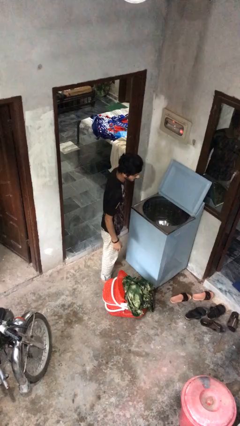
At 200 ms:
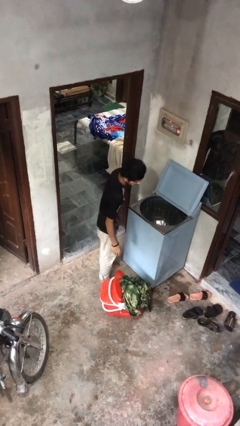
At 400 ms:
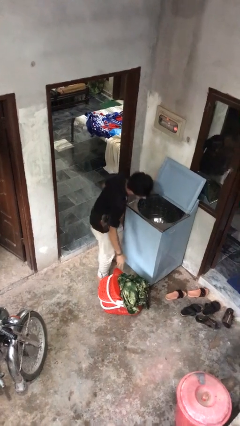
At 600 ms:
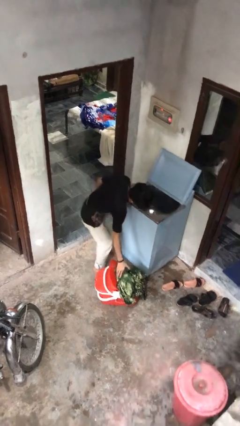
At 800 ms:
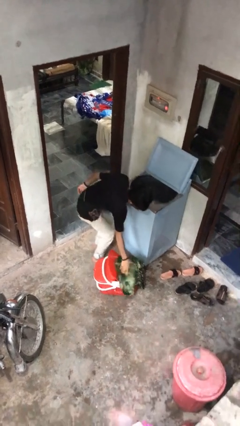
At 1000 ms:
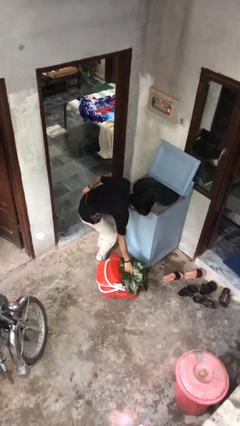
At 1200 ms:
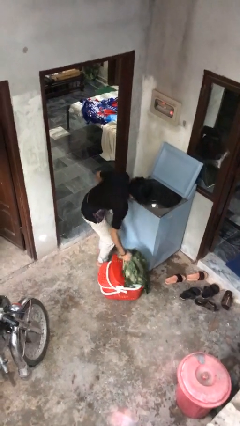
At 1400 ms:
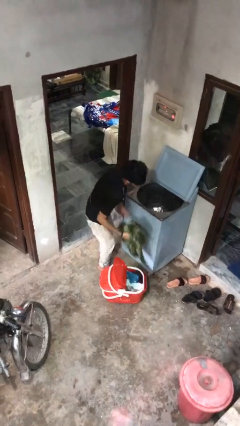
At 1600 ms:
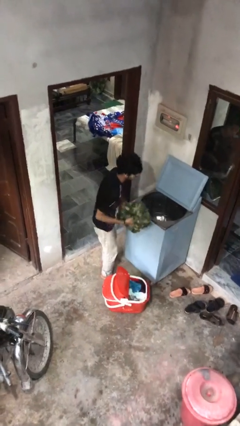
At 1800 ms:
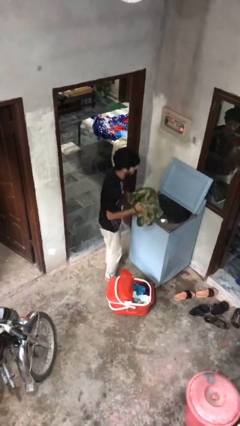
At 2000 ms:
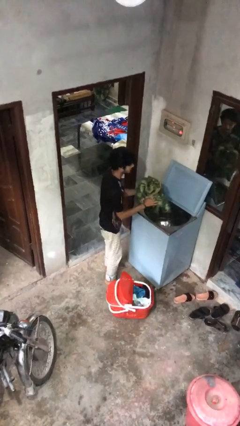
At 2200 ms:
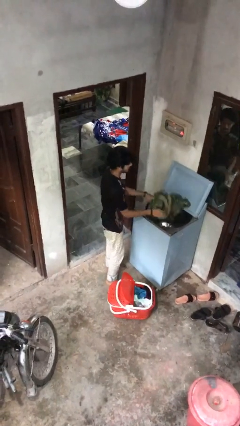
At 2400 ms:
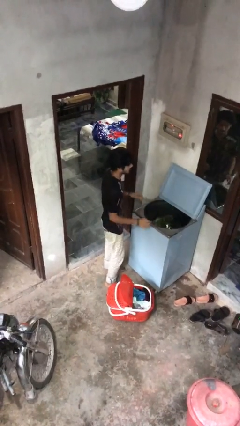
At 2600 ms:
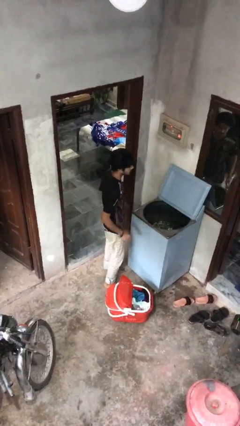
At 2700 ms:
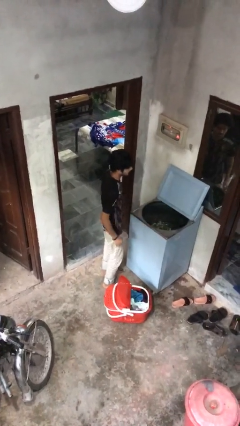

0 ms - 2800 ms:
person loads clotheswasher

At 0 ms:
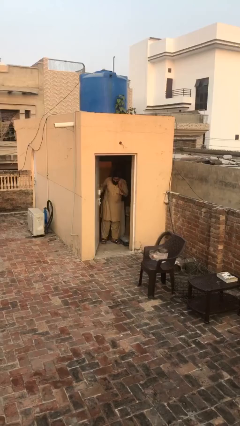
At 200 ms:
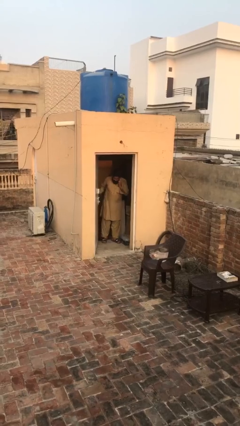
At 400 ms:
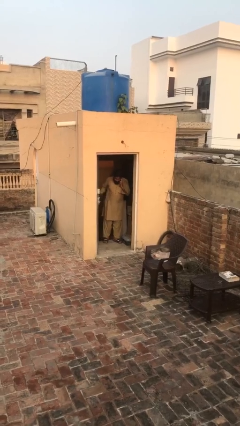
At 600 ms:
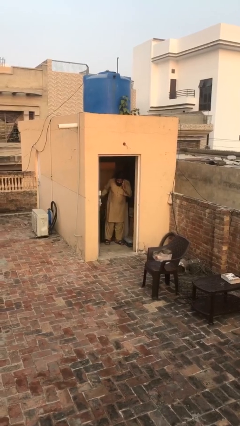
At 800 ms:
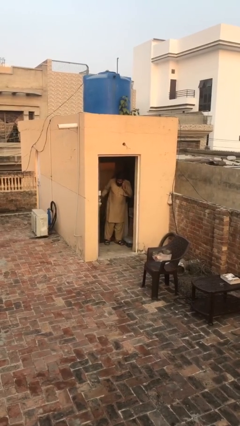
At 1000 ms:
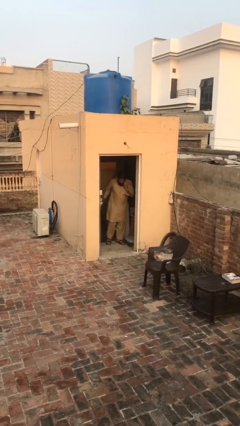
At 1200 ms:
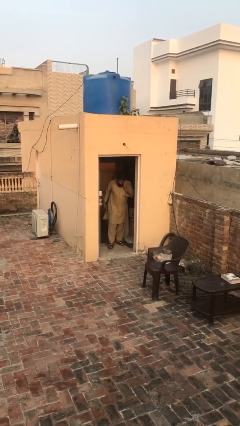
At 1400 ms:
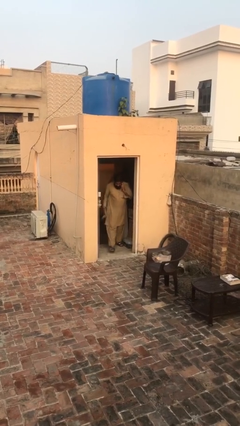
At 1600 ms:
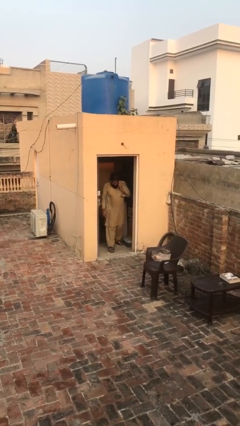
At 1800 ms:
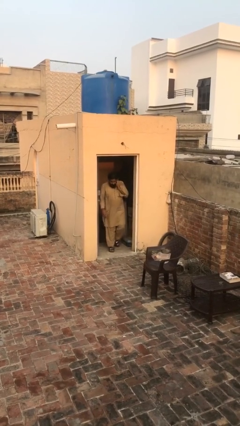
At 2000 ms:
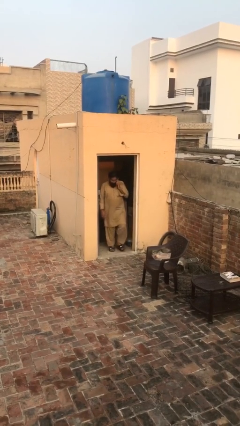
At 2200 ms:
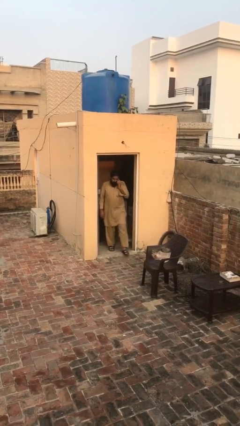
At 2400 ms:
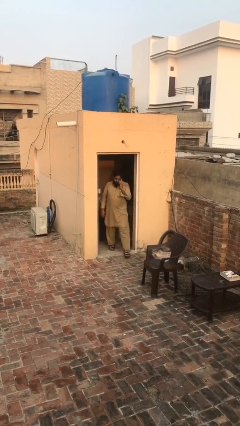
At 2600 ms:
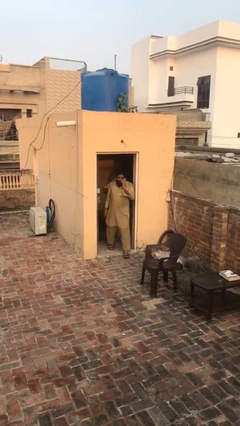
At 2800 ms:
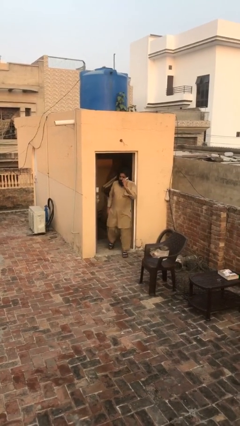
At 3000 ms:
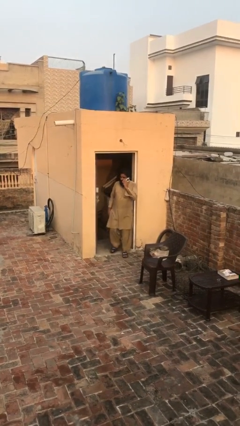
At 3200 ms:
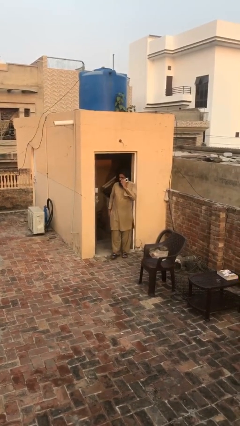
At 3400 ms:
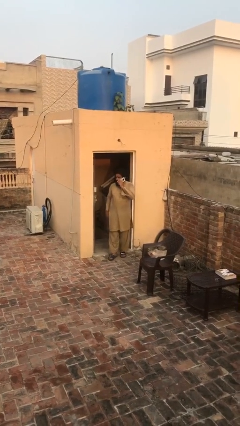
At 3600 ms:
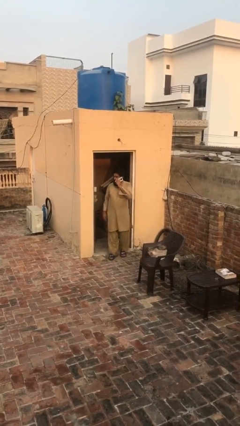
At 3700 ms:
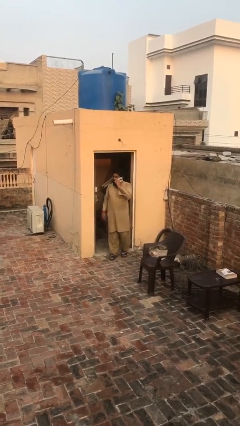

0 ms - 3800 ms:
person enters scene through structure

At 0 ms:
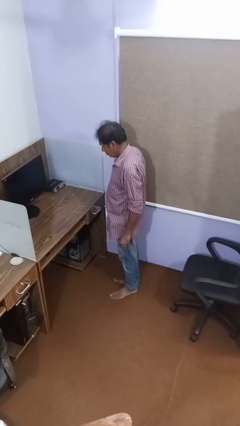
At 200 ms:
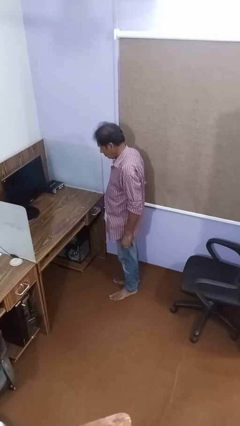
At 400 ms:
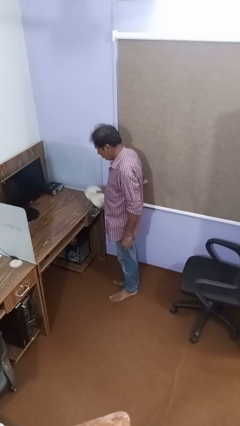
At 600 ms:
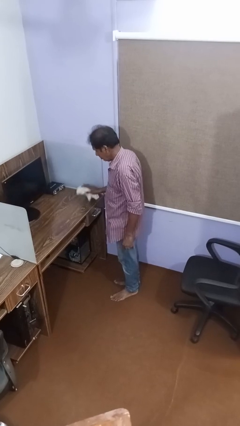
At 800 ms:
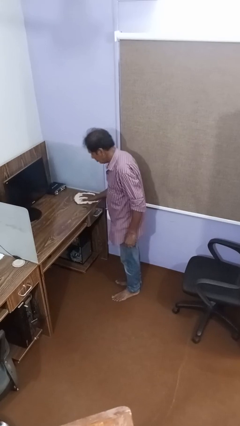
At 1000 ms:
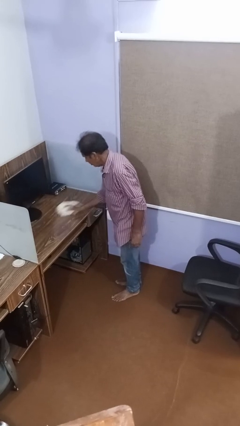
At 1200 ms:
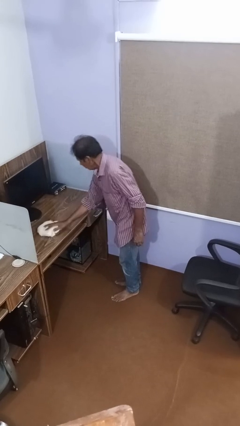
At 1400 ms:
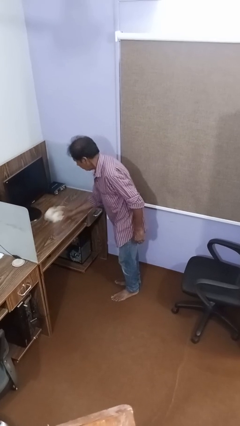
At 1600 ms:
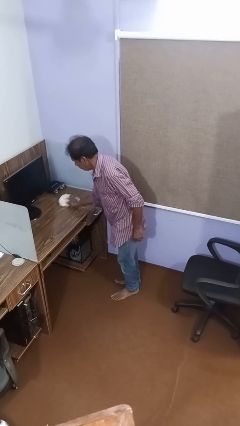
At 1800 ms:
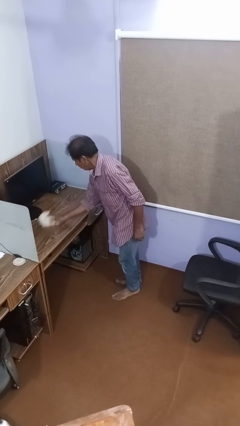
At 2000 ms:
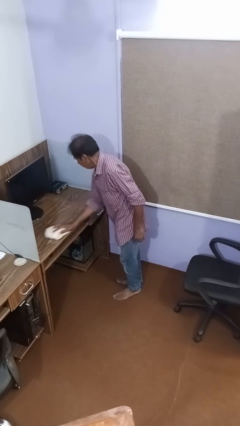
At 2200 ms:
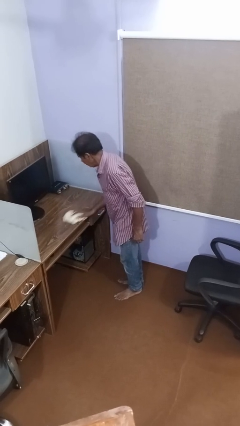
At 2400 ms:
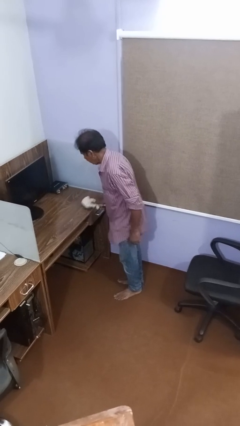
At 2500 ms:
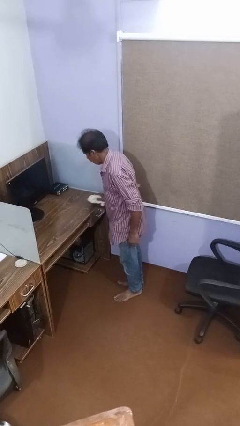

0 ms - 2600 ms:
person cleans table with rag

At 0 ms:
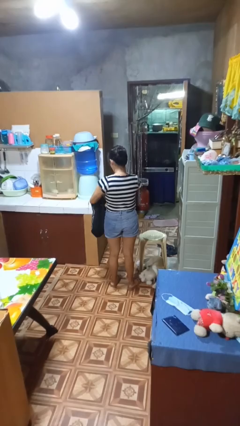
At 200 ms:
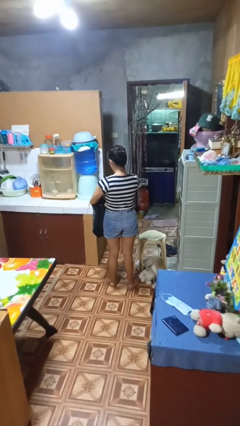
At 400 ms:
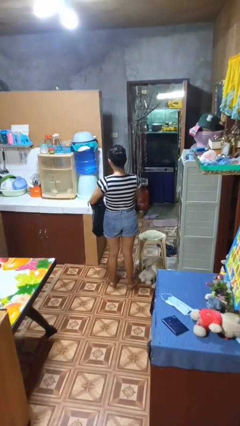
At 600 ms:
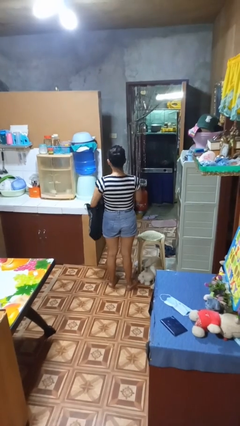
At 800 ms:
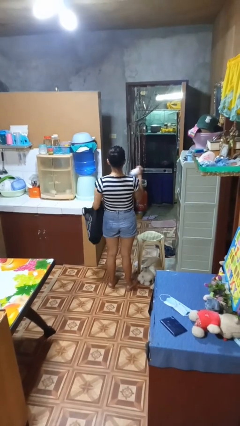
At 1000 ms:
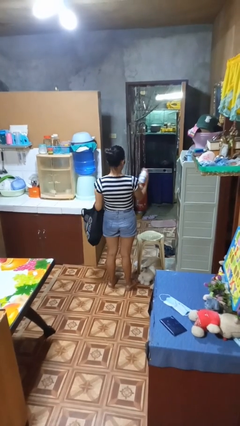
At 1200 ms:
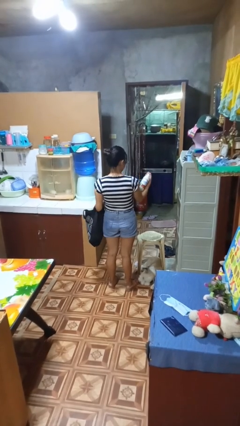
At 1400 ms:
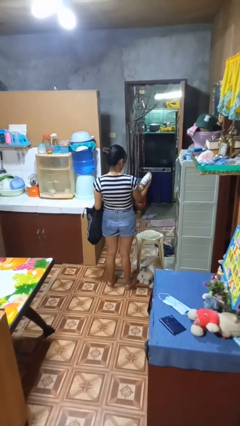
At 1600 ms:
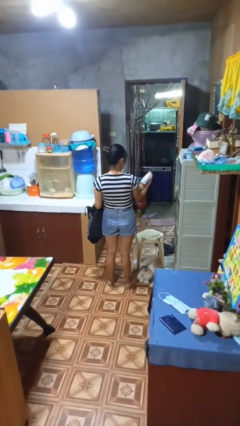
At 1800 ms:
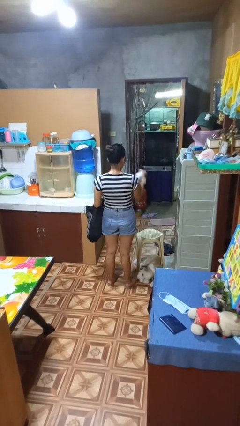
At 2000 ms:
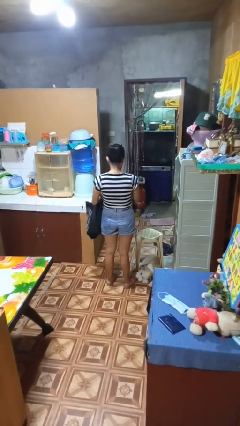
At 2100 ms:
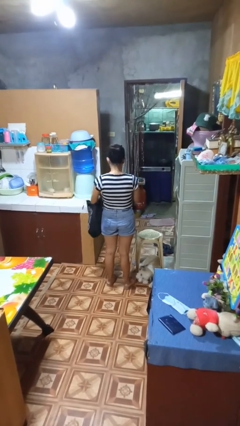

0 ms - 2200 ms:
person takes object from bag

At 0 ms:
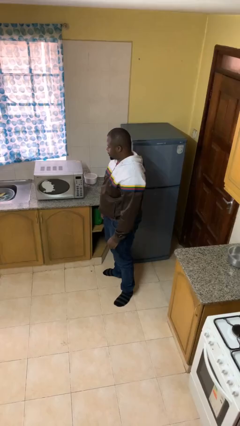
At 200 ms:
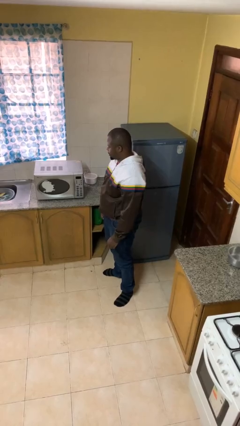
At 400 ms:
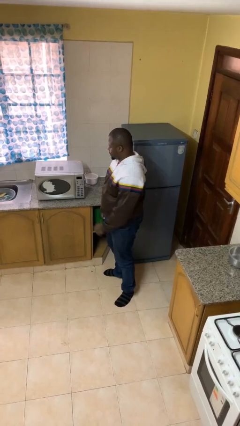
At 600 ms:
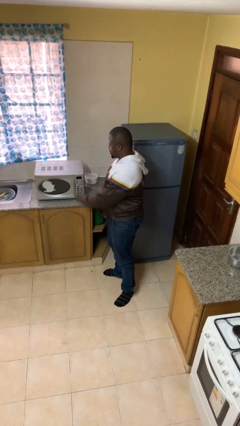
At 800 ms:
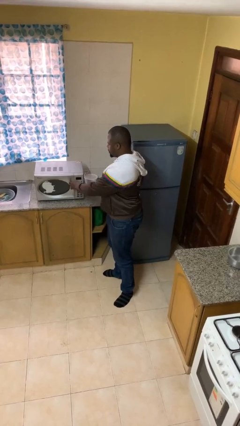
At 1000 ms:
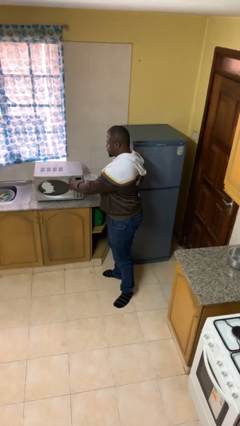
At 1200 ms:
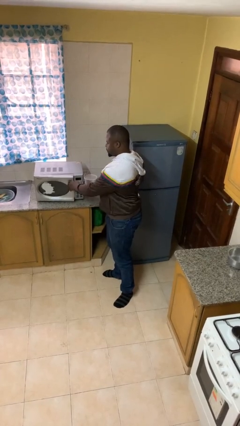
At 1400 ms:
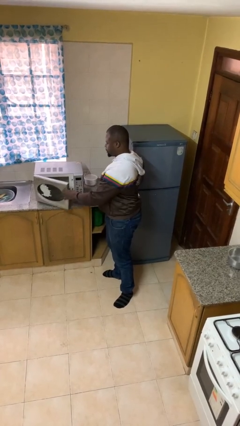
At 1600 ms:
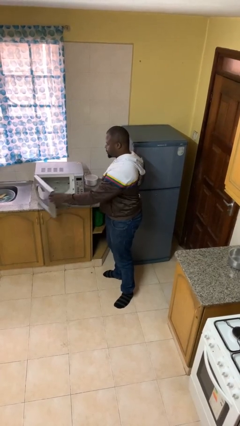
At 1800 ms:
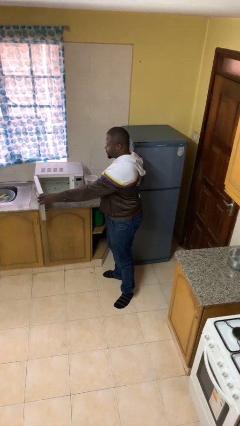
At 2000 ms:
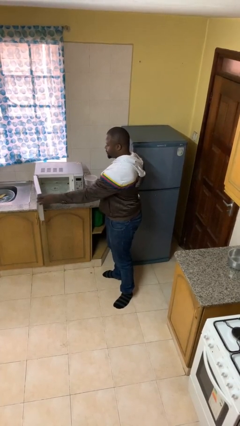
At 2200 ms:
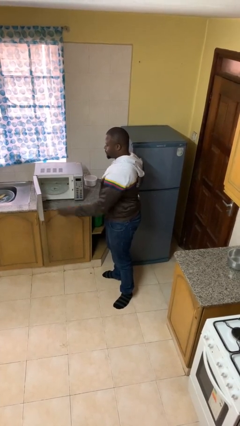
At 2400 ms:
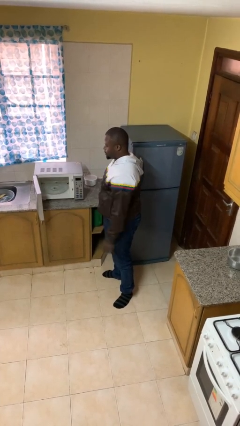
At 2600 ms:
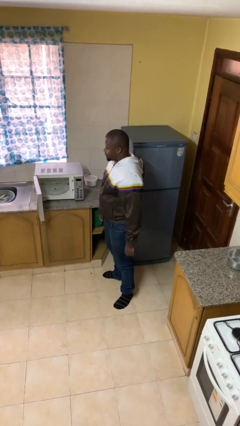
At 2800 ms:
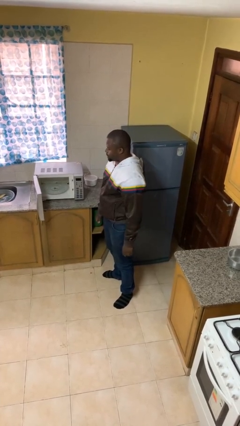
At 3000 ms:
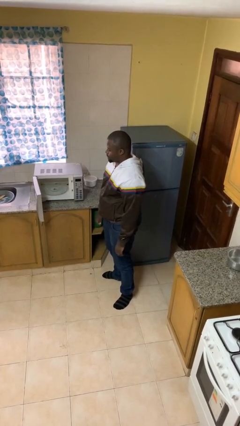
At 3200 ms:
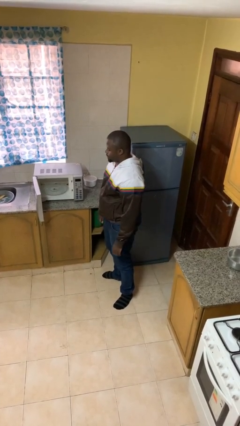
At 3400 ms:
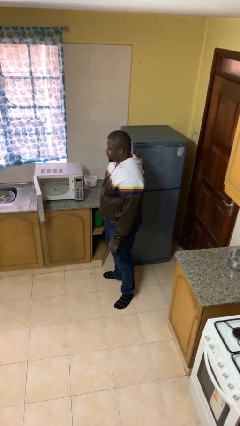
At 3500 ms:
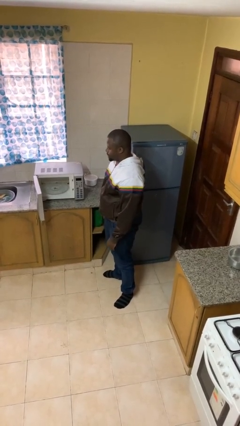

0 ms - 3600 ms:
person opens microwave

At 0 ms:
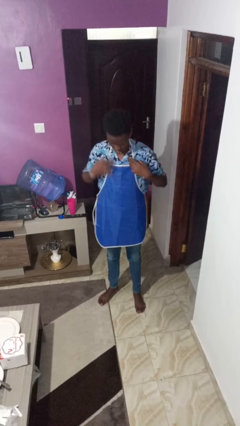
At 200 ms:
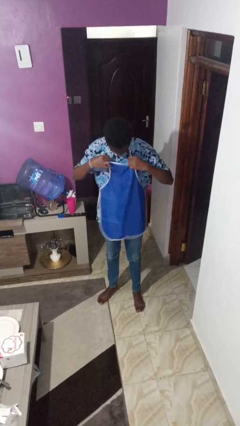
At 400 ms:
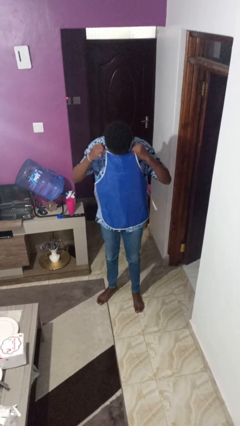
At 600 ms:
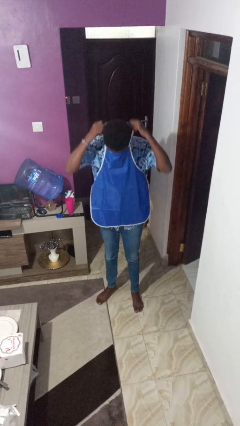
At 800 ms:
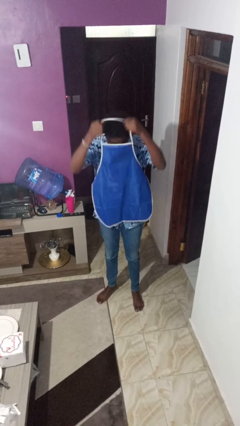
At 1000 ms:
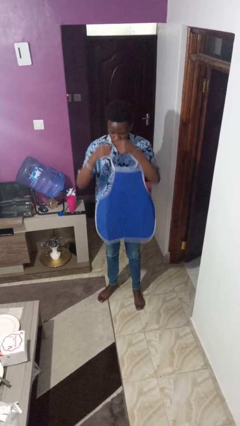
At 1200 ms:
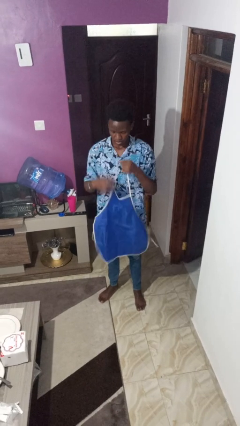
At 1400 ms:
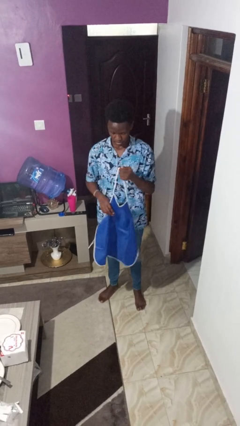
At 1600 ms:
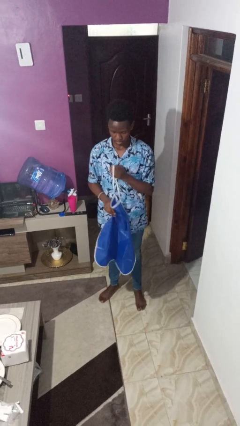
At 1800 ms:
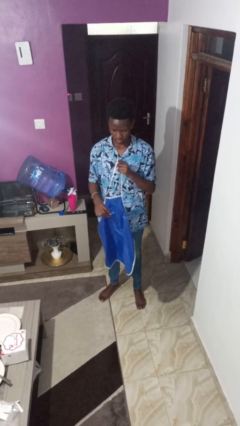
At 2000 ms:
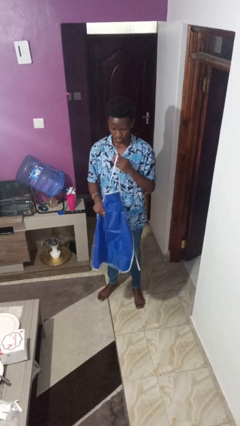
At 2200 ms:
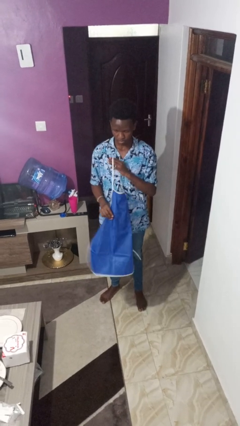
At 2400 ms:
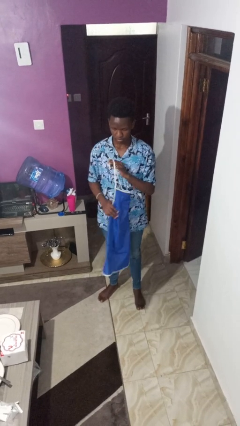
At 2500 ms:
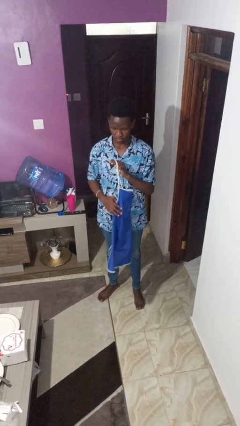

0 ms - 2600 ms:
person takes off apron
